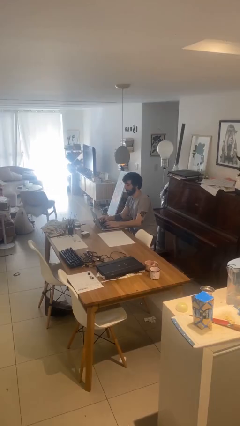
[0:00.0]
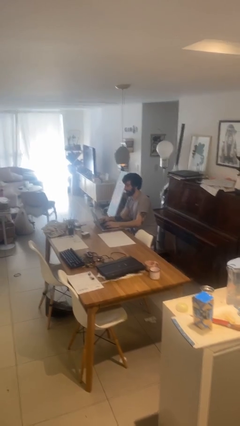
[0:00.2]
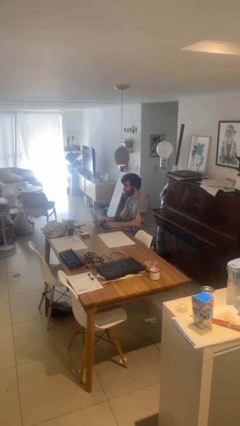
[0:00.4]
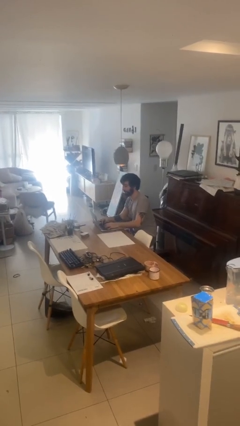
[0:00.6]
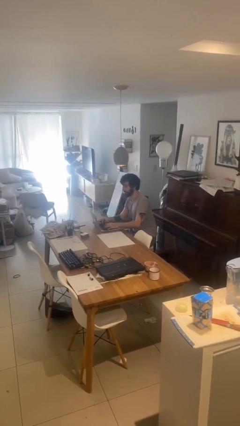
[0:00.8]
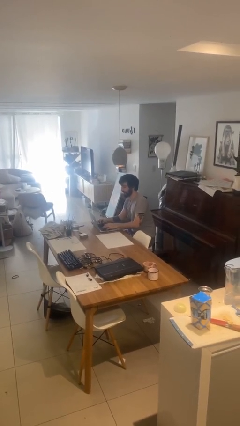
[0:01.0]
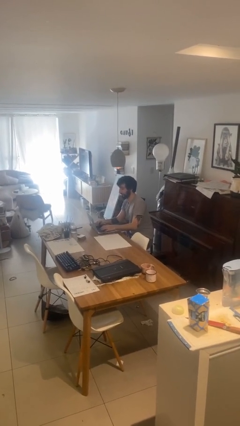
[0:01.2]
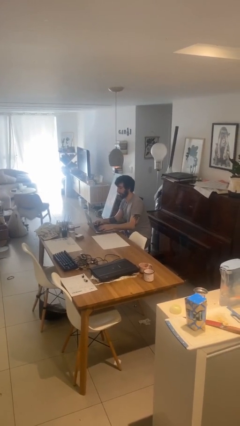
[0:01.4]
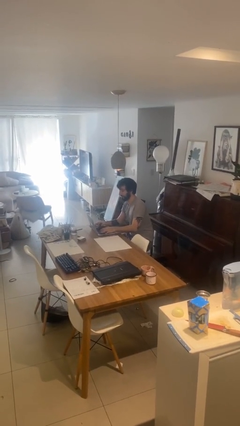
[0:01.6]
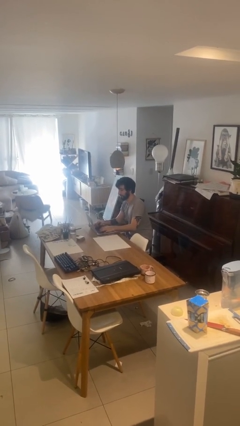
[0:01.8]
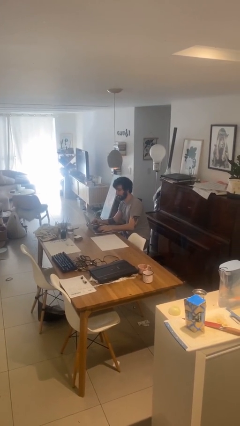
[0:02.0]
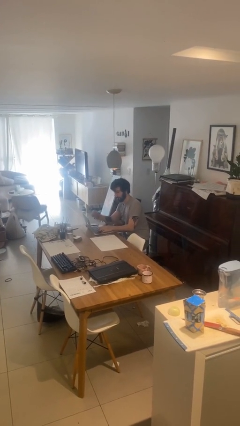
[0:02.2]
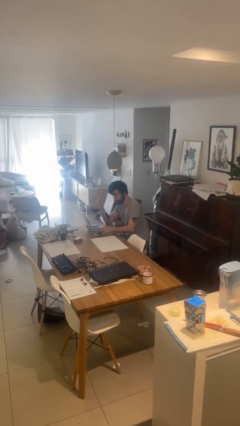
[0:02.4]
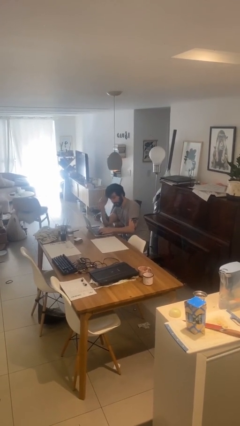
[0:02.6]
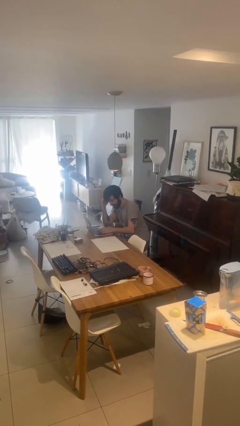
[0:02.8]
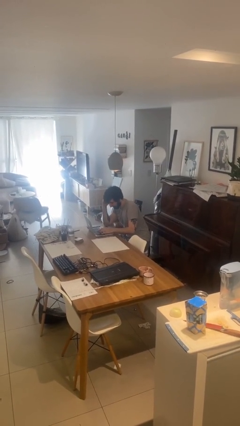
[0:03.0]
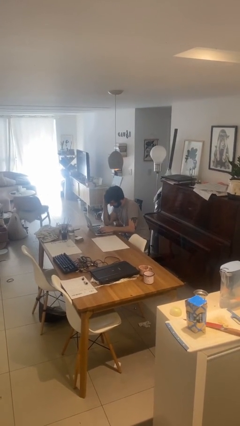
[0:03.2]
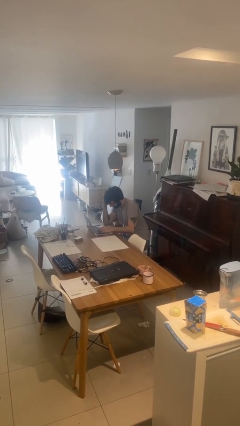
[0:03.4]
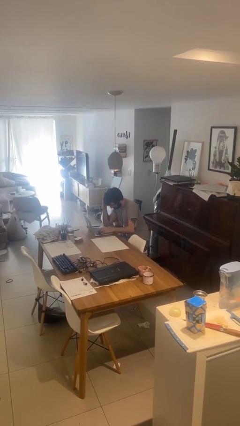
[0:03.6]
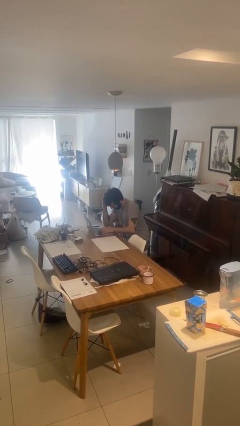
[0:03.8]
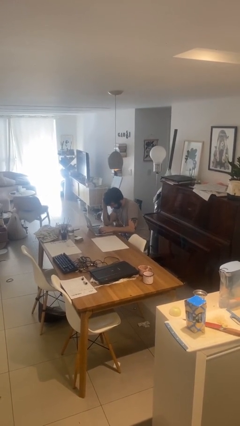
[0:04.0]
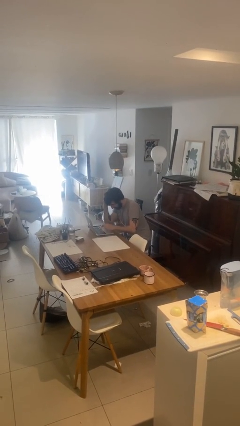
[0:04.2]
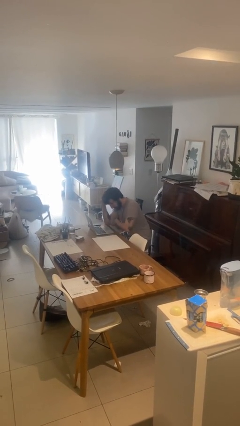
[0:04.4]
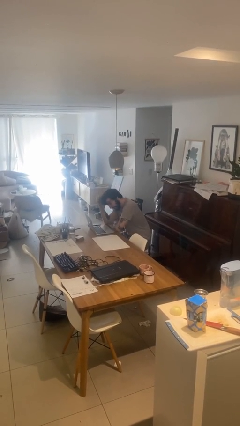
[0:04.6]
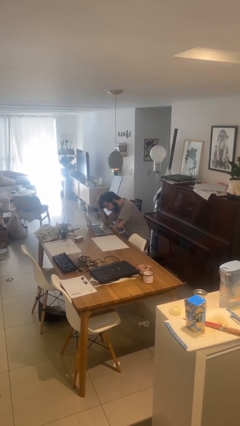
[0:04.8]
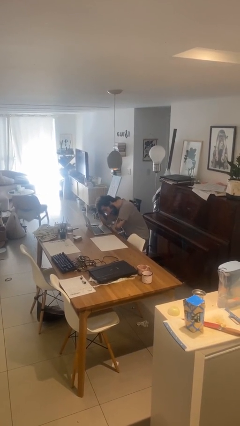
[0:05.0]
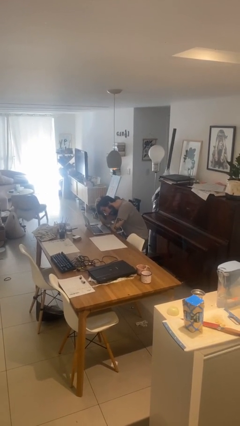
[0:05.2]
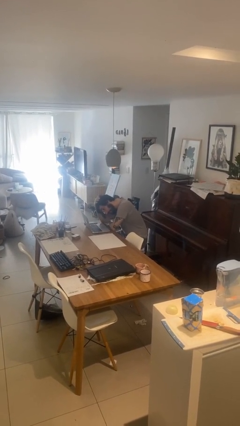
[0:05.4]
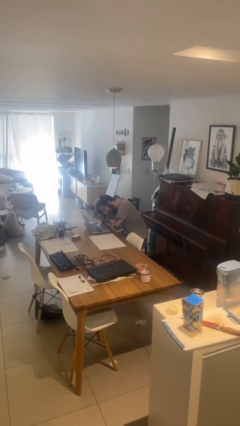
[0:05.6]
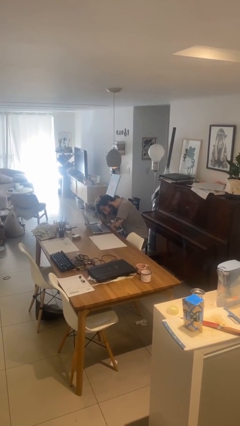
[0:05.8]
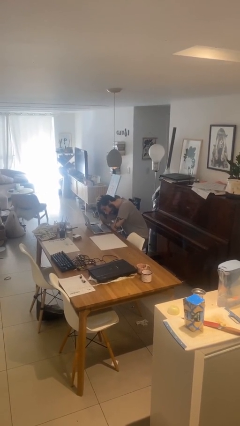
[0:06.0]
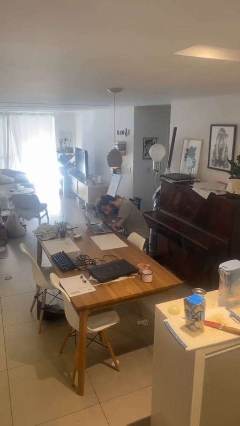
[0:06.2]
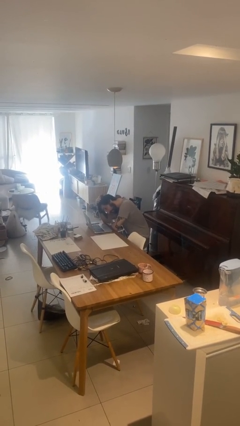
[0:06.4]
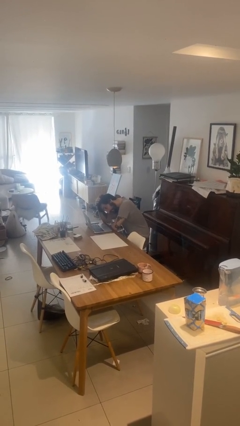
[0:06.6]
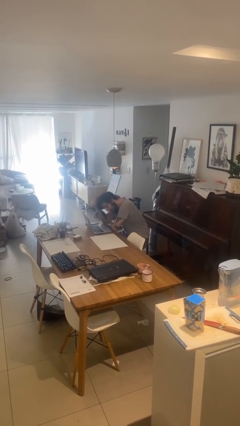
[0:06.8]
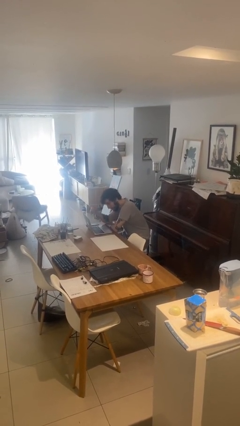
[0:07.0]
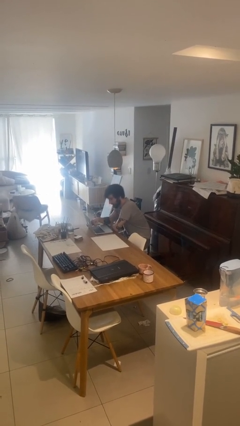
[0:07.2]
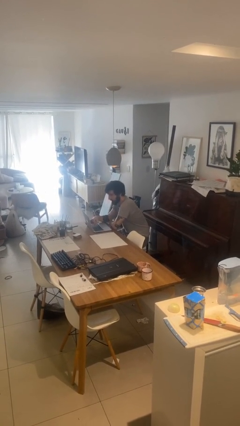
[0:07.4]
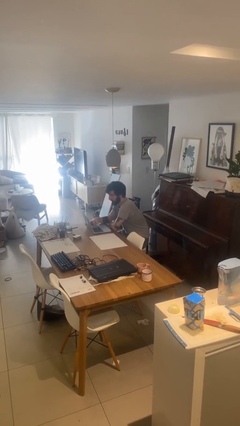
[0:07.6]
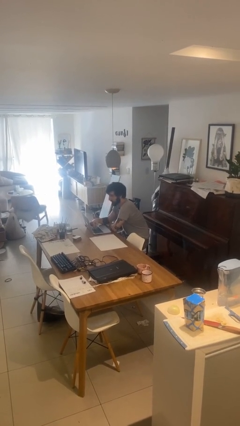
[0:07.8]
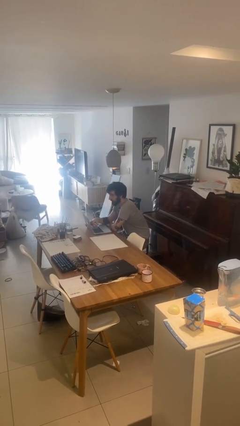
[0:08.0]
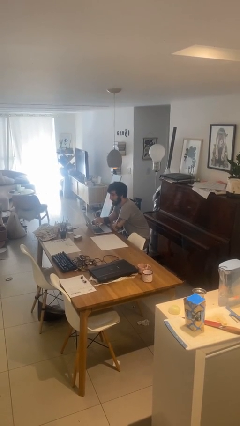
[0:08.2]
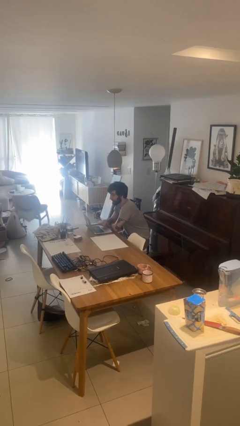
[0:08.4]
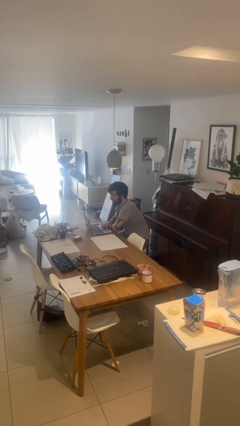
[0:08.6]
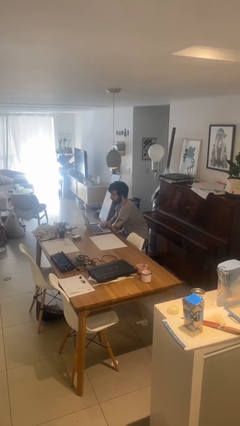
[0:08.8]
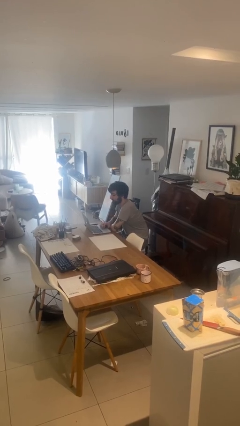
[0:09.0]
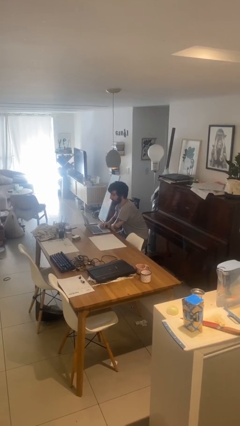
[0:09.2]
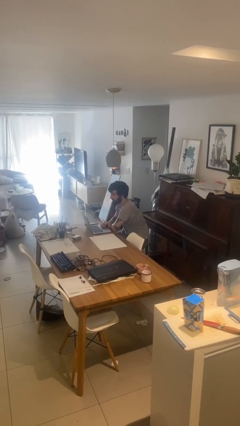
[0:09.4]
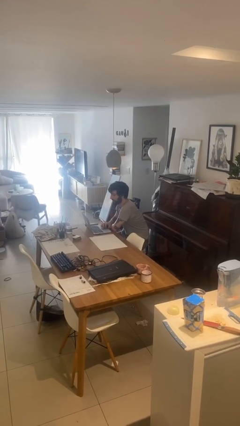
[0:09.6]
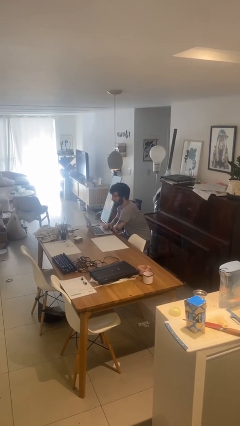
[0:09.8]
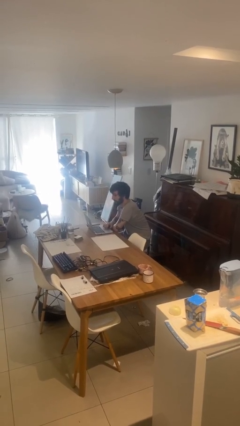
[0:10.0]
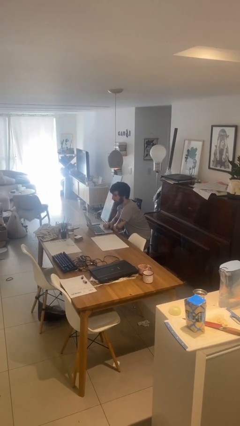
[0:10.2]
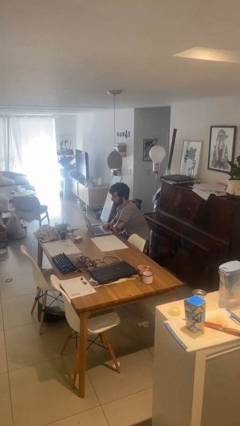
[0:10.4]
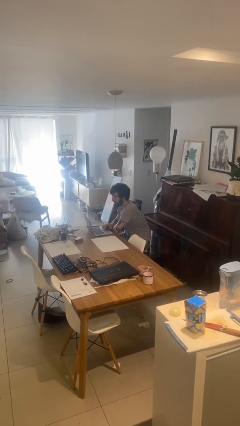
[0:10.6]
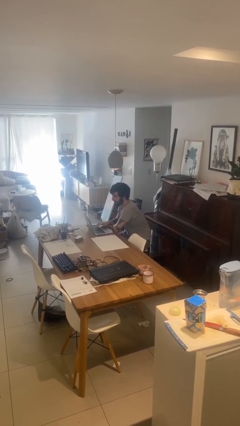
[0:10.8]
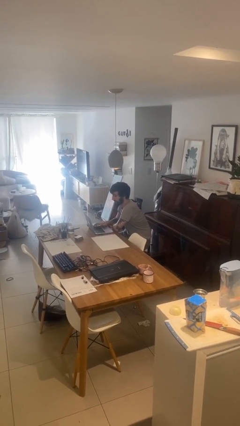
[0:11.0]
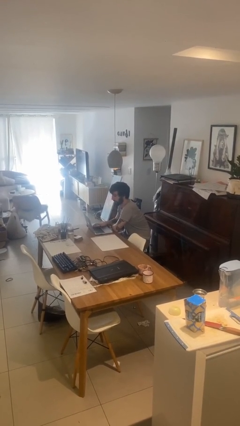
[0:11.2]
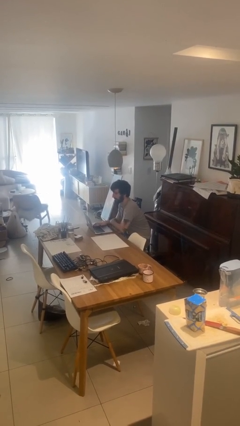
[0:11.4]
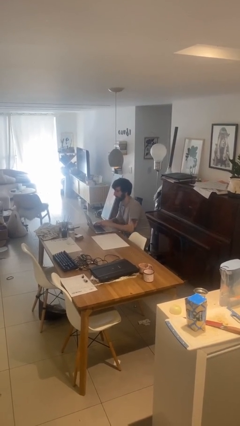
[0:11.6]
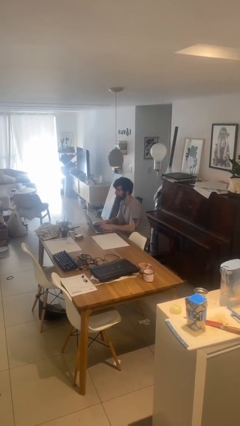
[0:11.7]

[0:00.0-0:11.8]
person interacts with laptop

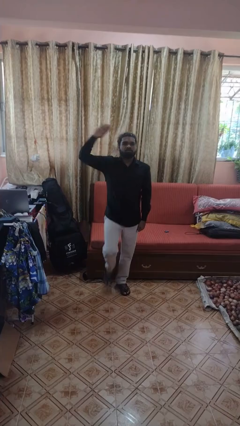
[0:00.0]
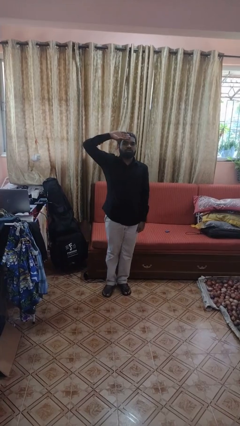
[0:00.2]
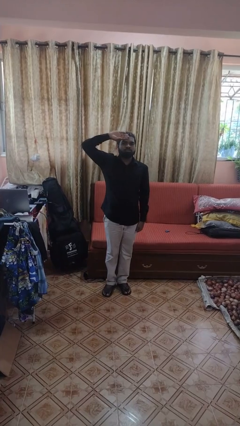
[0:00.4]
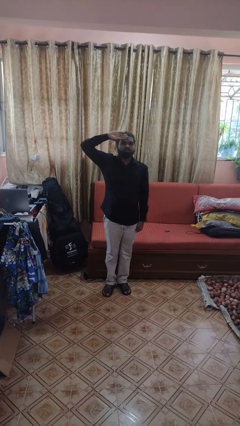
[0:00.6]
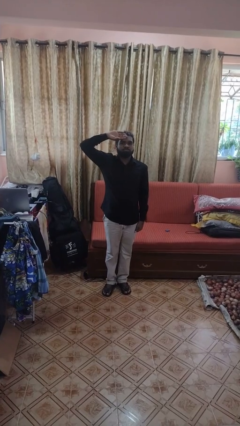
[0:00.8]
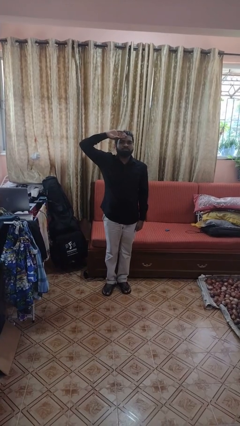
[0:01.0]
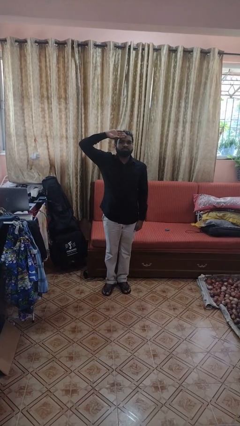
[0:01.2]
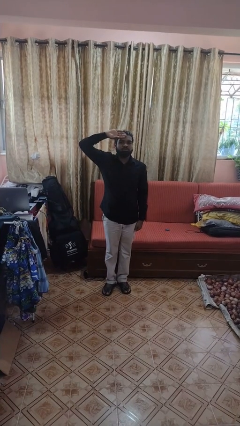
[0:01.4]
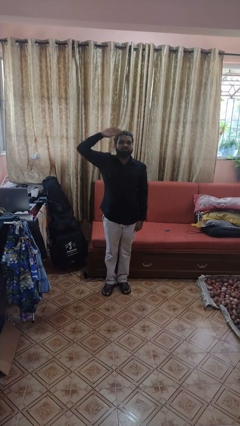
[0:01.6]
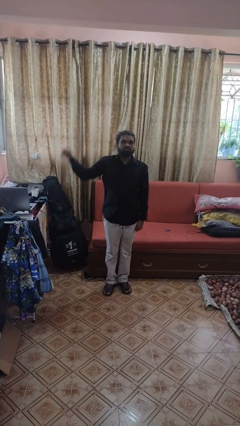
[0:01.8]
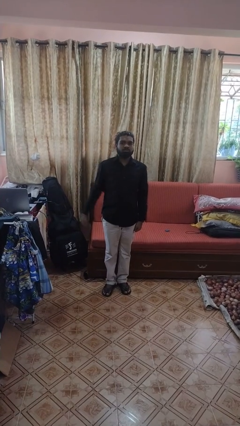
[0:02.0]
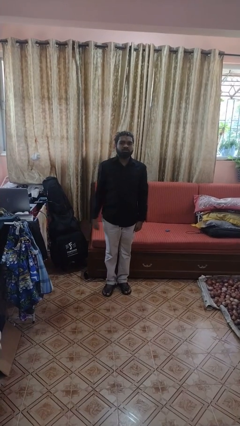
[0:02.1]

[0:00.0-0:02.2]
person salutes

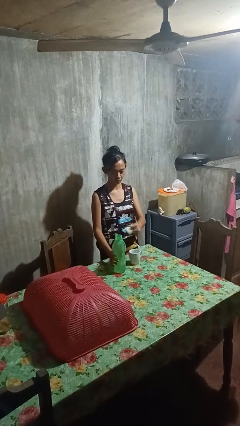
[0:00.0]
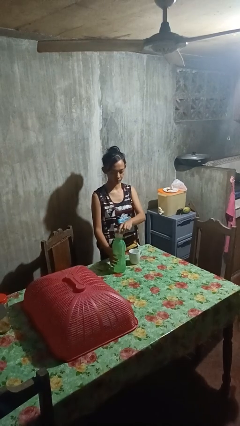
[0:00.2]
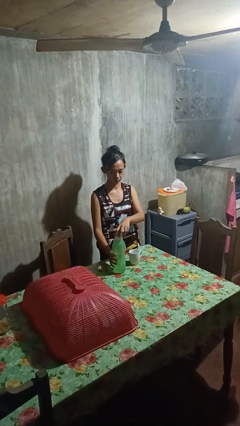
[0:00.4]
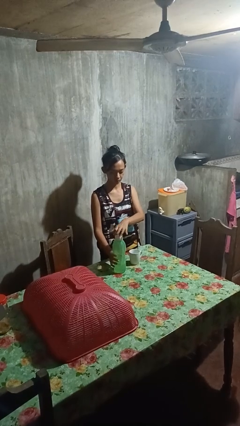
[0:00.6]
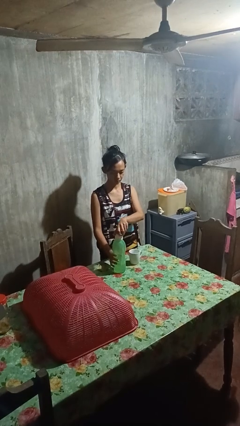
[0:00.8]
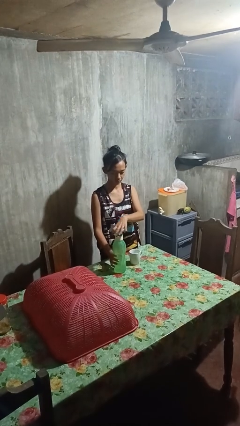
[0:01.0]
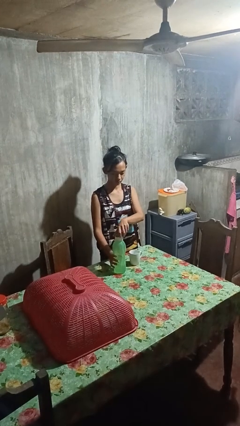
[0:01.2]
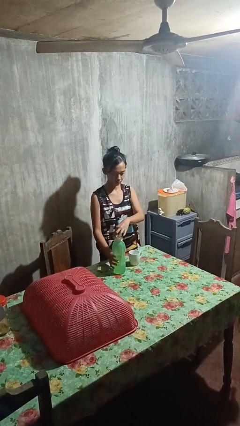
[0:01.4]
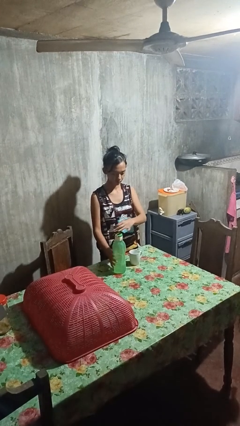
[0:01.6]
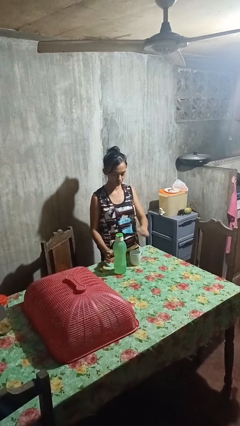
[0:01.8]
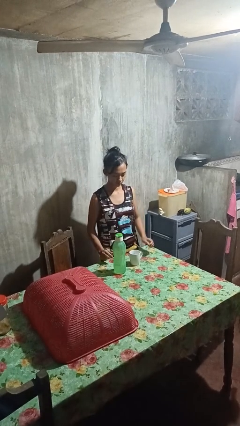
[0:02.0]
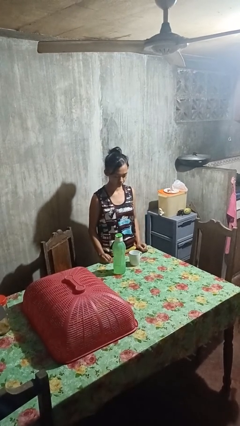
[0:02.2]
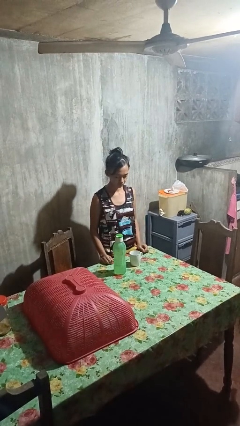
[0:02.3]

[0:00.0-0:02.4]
person screws lid to bottle

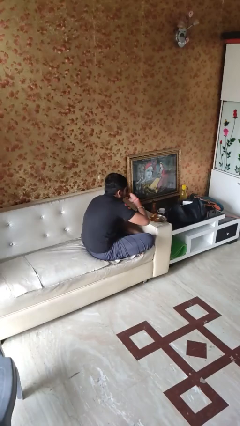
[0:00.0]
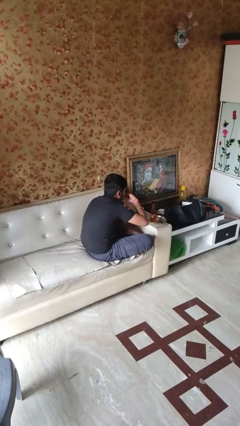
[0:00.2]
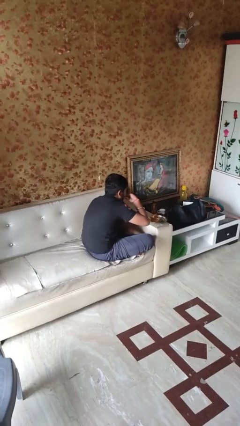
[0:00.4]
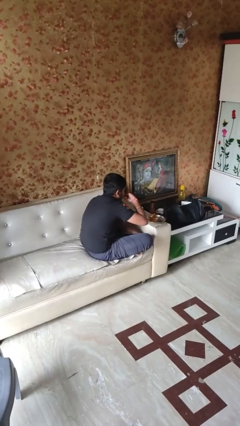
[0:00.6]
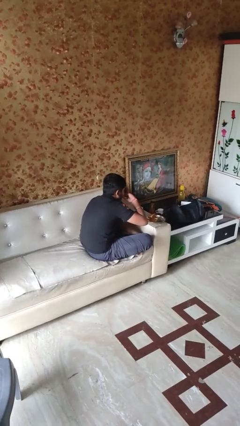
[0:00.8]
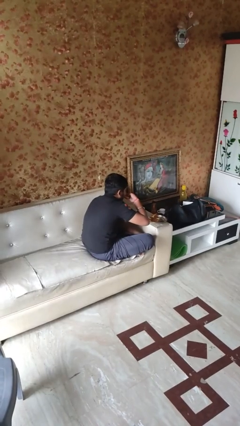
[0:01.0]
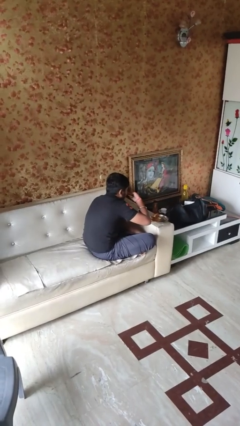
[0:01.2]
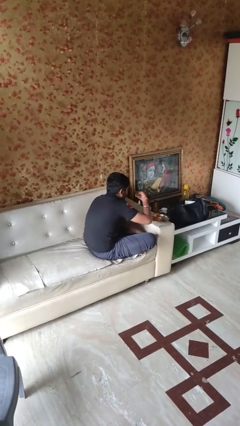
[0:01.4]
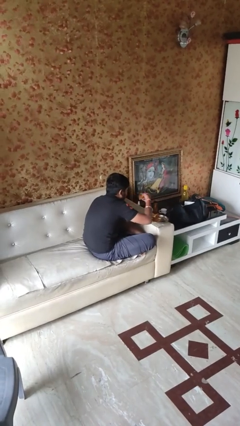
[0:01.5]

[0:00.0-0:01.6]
person eats with hands
